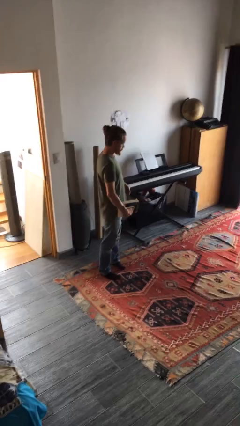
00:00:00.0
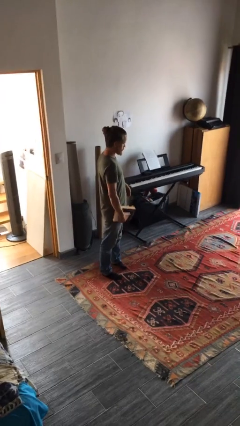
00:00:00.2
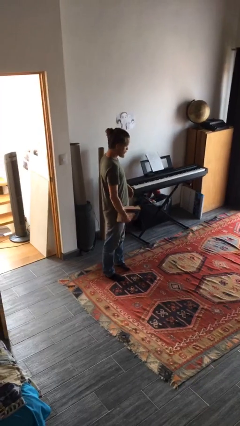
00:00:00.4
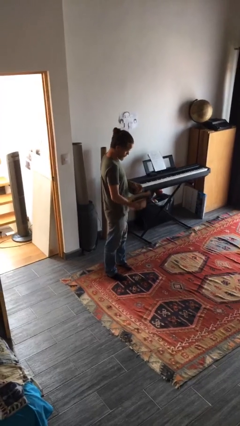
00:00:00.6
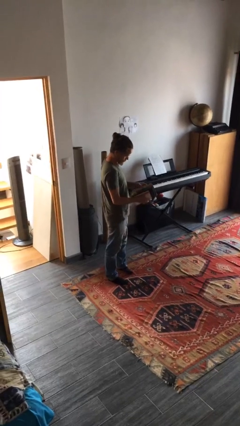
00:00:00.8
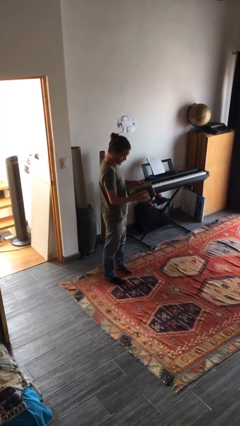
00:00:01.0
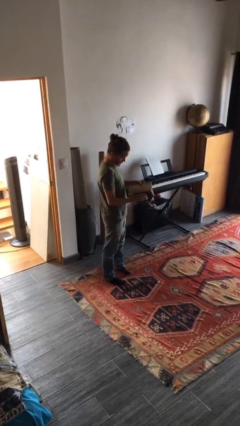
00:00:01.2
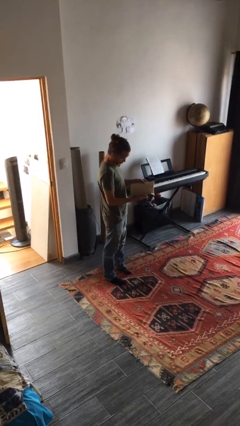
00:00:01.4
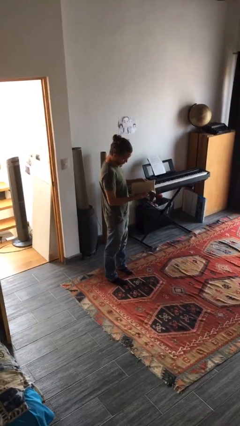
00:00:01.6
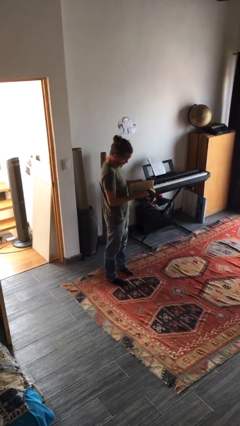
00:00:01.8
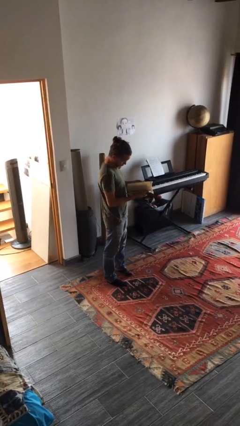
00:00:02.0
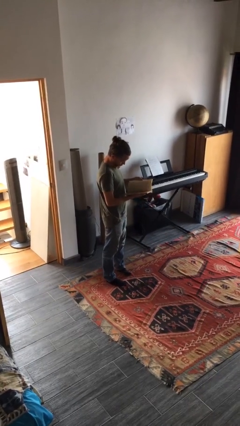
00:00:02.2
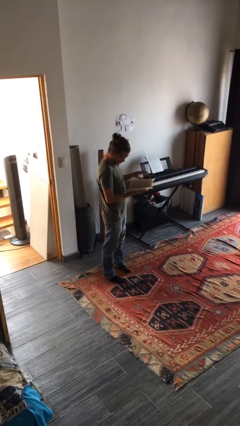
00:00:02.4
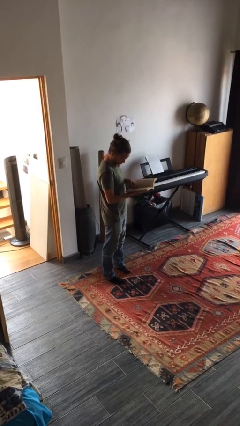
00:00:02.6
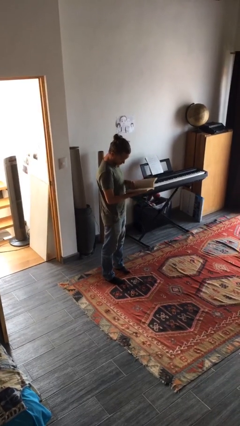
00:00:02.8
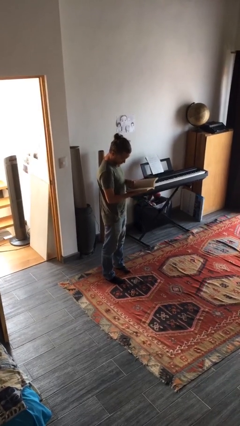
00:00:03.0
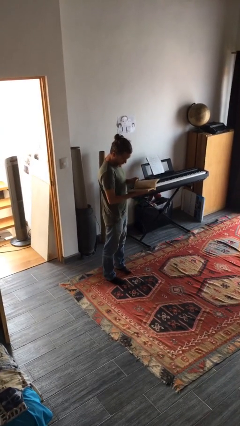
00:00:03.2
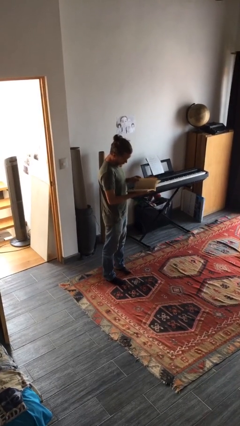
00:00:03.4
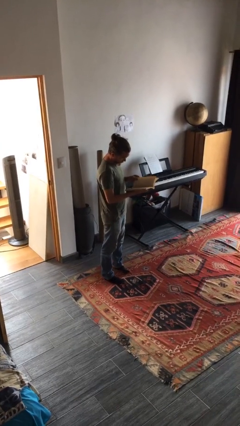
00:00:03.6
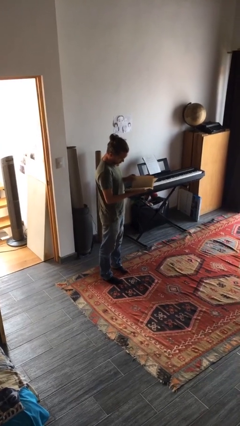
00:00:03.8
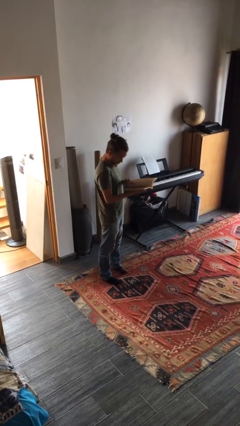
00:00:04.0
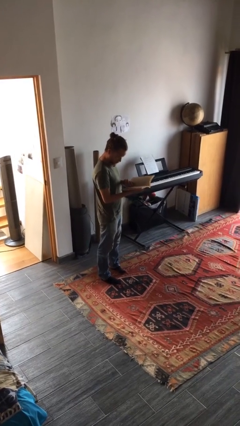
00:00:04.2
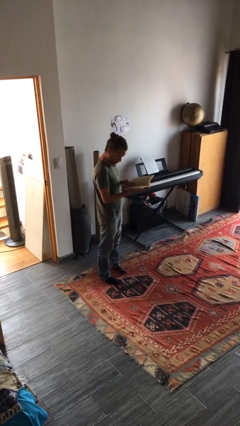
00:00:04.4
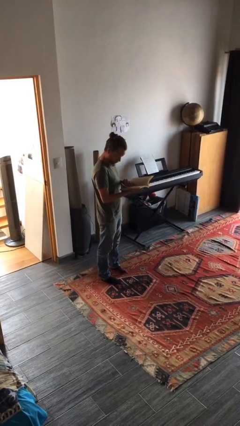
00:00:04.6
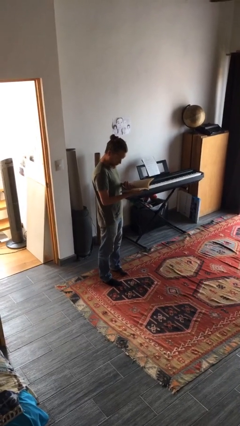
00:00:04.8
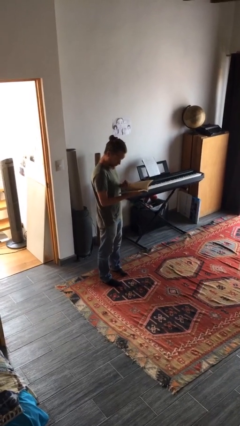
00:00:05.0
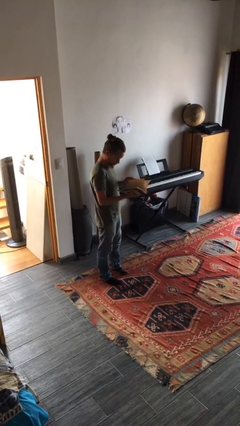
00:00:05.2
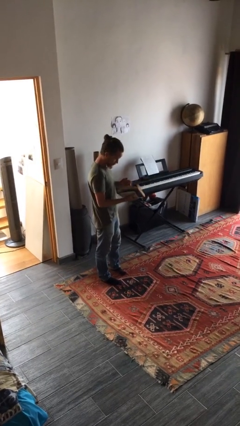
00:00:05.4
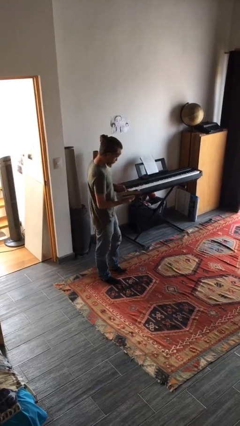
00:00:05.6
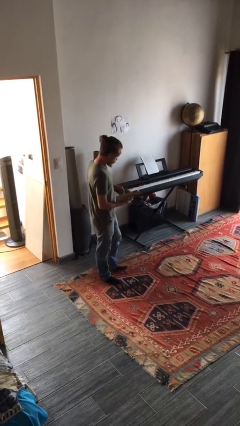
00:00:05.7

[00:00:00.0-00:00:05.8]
person reads book

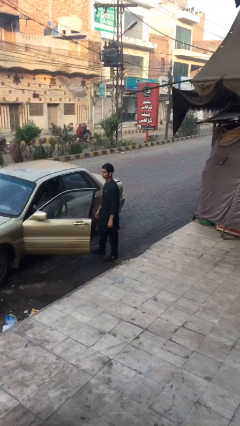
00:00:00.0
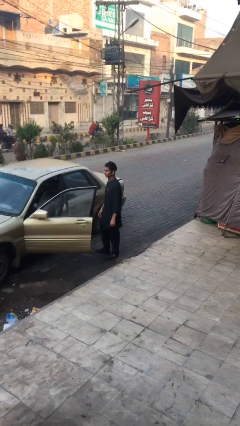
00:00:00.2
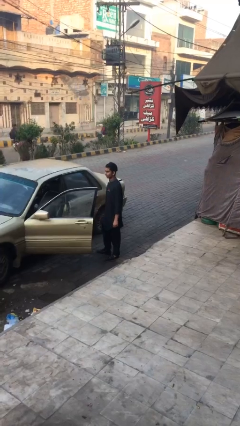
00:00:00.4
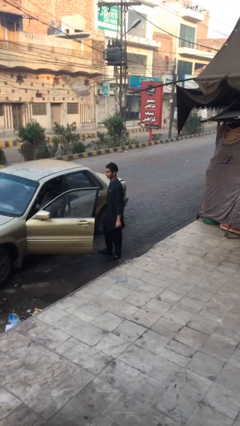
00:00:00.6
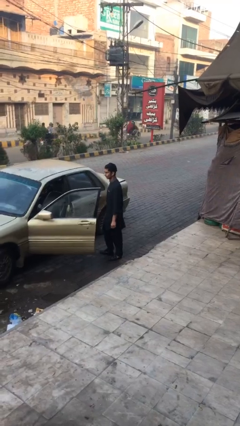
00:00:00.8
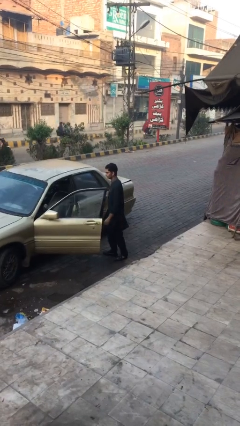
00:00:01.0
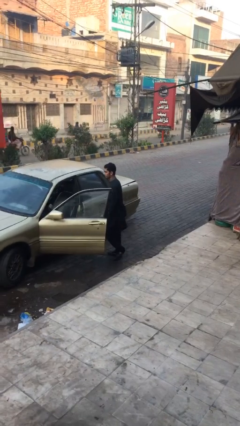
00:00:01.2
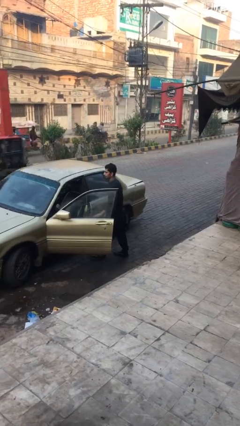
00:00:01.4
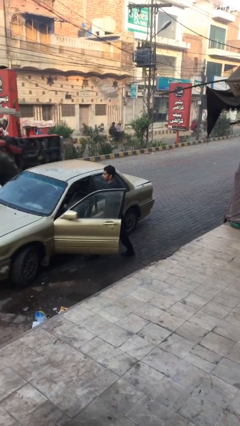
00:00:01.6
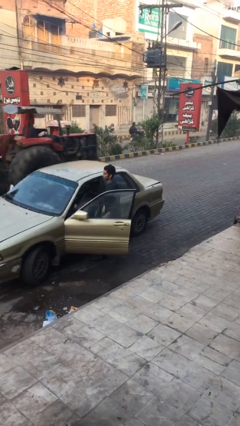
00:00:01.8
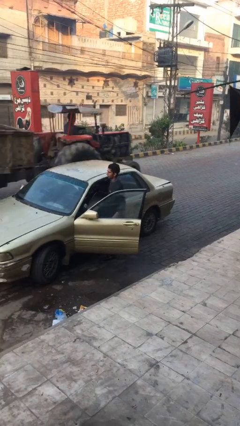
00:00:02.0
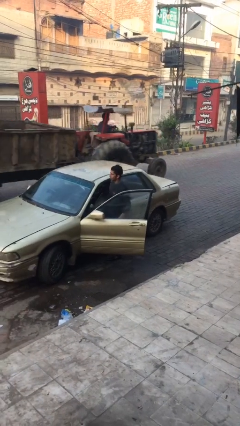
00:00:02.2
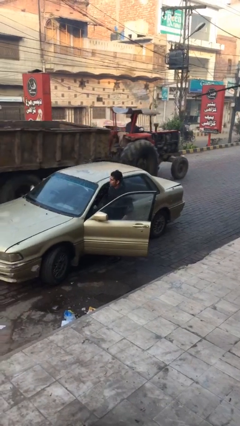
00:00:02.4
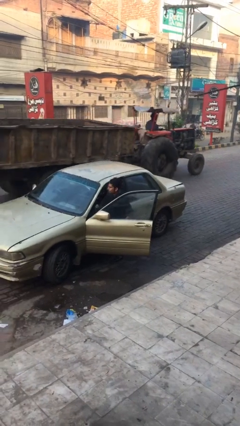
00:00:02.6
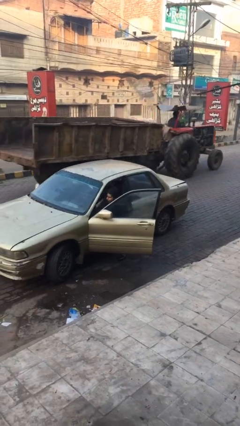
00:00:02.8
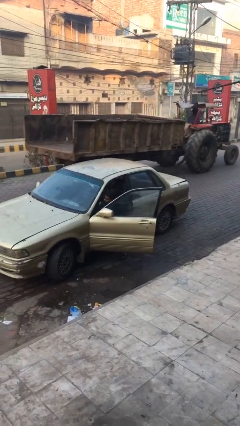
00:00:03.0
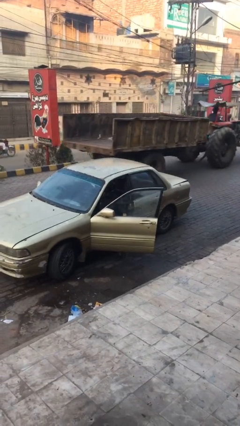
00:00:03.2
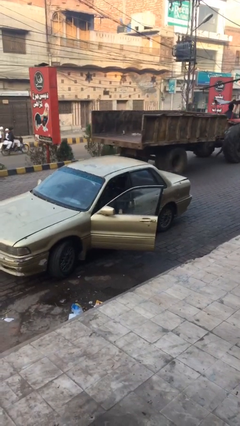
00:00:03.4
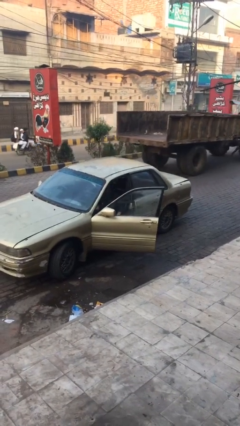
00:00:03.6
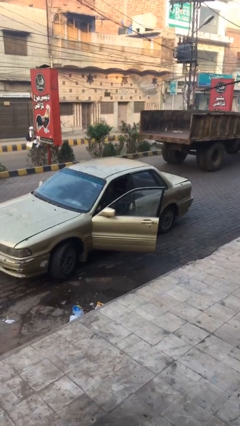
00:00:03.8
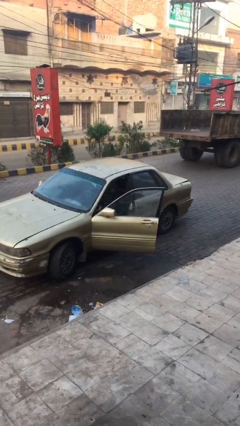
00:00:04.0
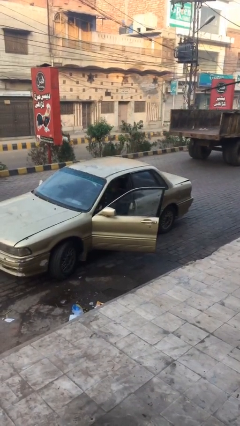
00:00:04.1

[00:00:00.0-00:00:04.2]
person enters car

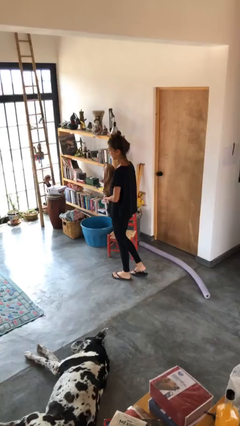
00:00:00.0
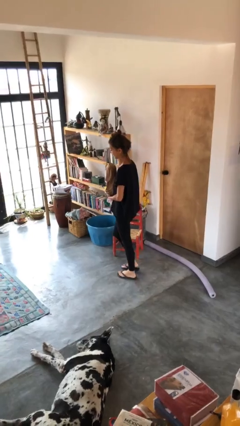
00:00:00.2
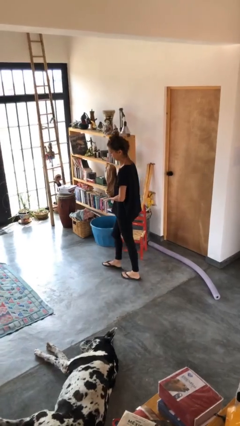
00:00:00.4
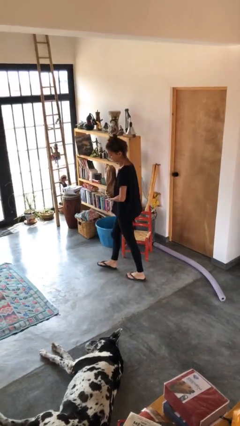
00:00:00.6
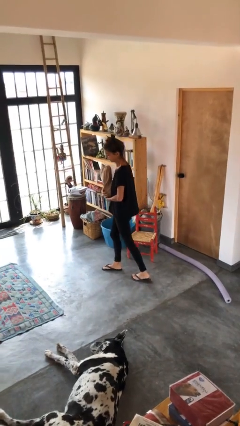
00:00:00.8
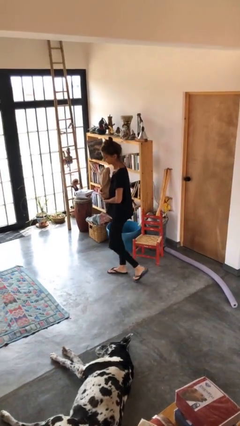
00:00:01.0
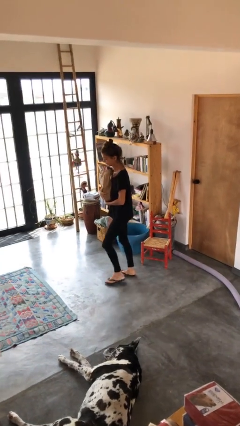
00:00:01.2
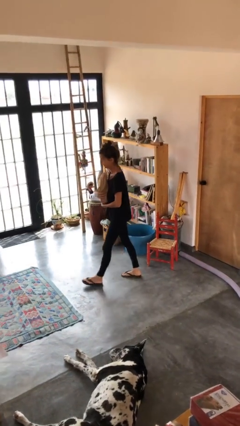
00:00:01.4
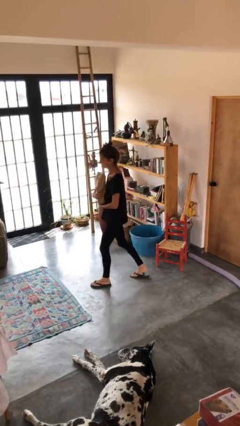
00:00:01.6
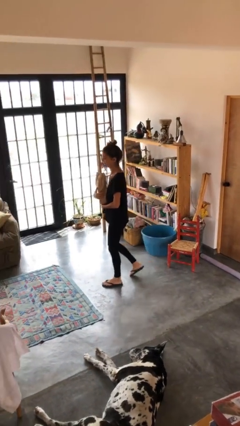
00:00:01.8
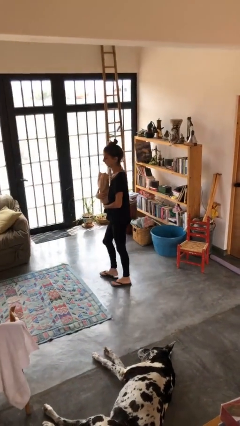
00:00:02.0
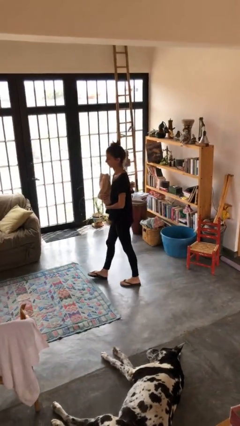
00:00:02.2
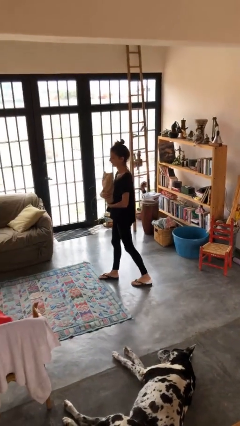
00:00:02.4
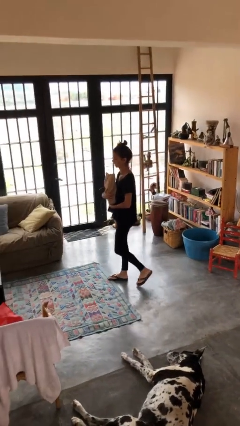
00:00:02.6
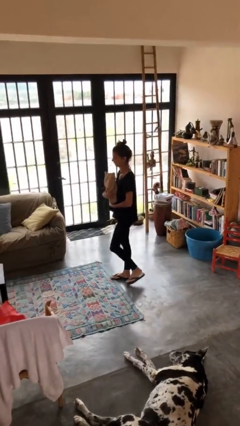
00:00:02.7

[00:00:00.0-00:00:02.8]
person carries groceries

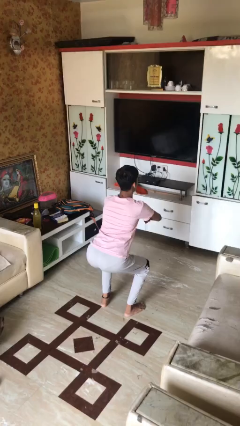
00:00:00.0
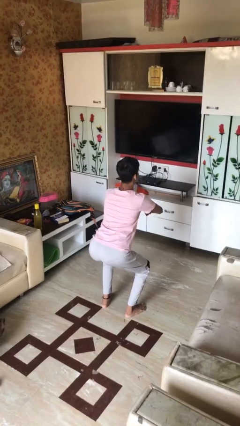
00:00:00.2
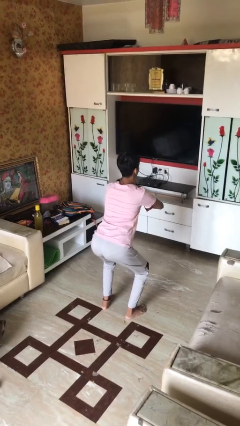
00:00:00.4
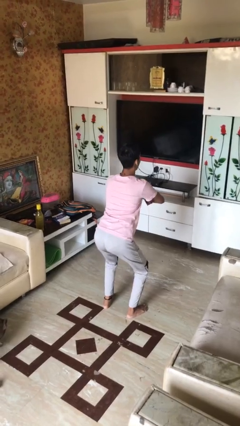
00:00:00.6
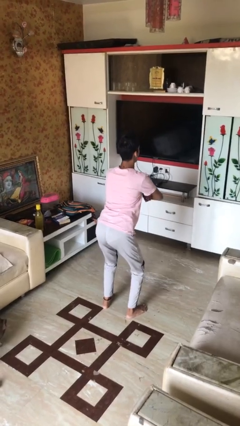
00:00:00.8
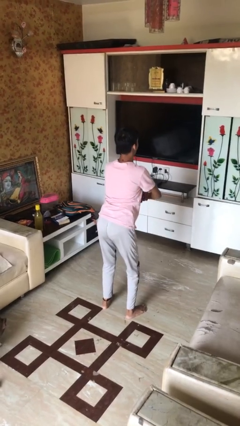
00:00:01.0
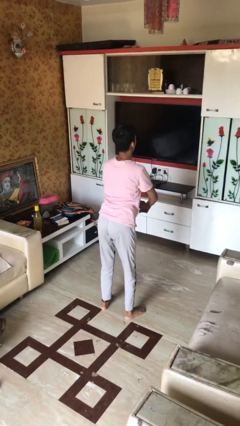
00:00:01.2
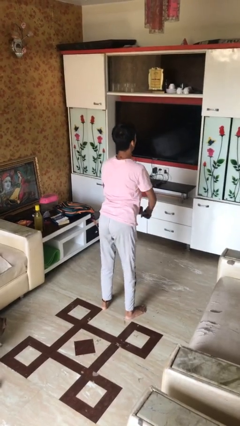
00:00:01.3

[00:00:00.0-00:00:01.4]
person stands up

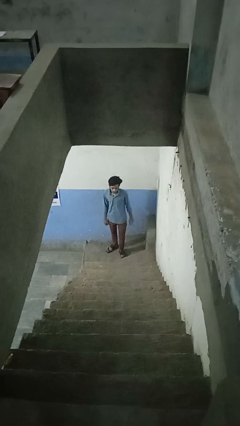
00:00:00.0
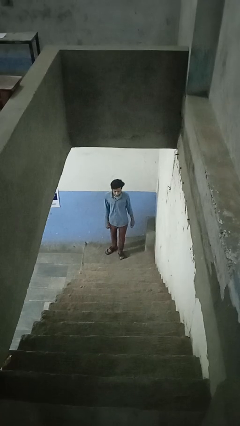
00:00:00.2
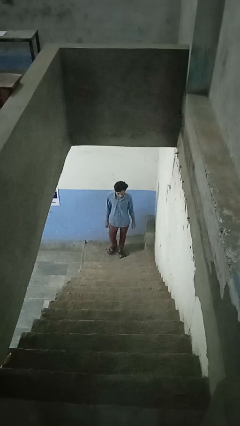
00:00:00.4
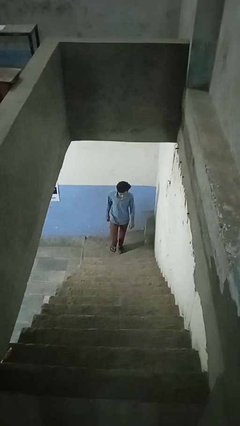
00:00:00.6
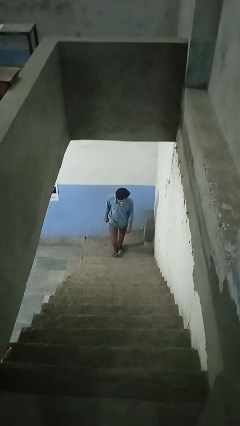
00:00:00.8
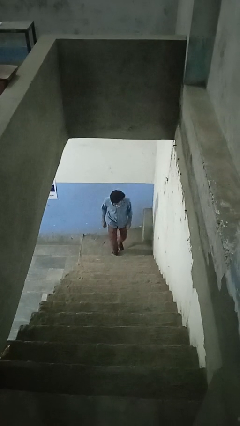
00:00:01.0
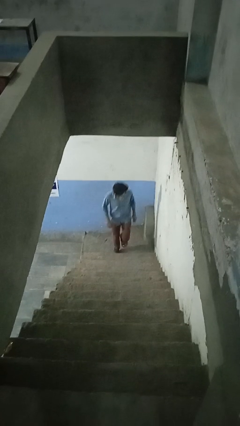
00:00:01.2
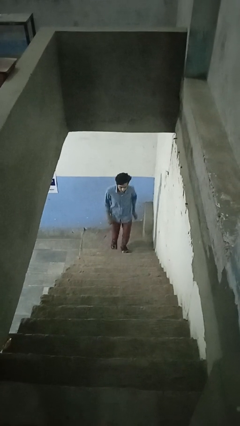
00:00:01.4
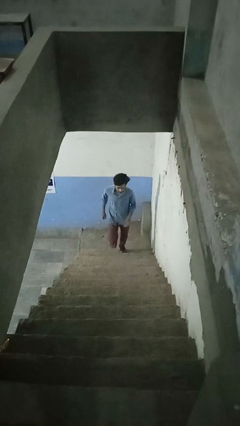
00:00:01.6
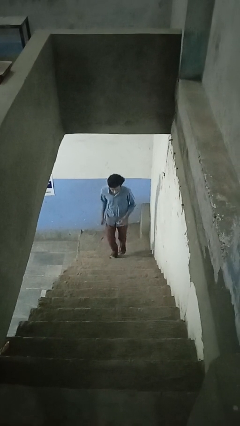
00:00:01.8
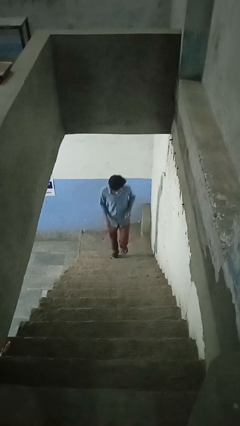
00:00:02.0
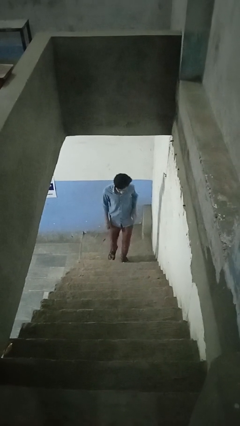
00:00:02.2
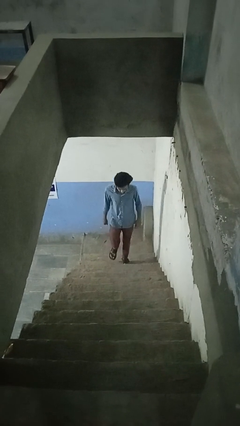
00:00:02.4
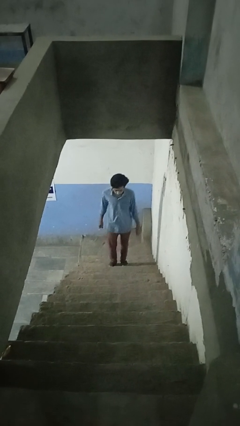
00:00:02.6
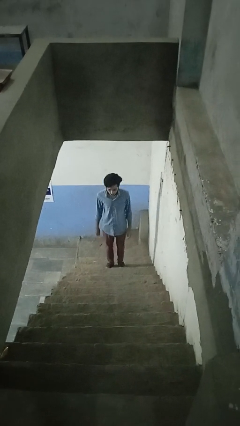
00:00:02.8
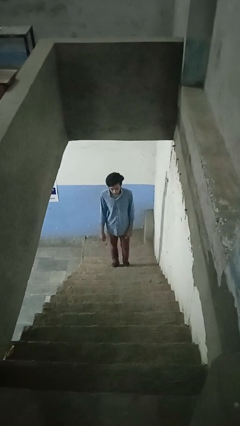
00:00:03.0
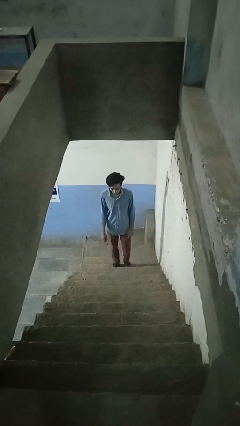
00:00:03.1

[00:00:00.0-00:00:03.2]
person climbs up stairs

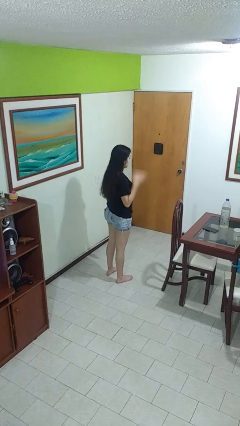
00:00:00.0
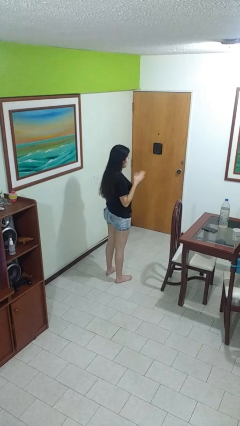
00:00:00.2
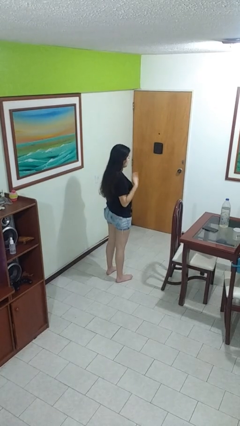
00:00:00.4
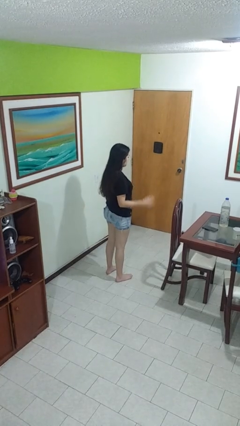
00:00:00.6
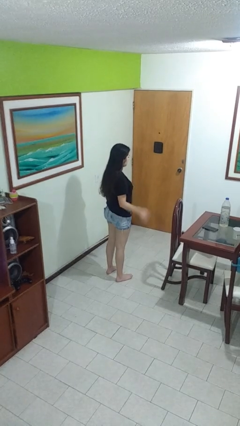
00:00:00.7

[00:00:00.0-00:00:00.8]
person drums on chest
